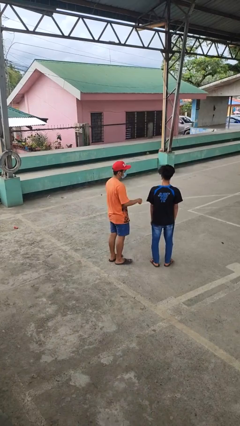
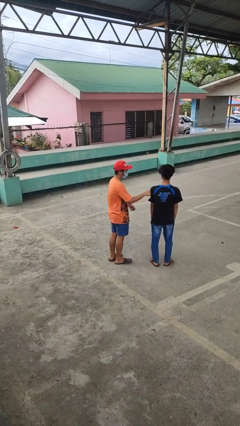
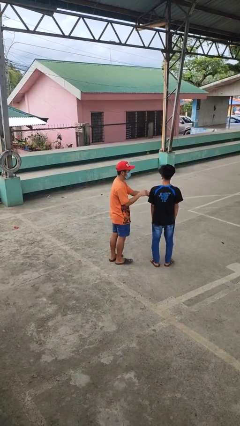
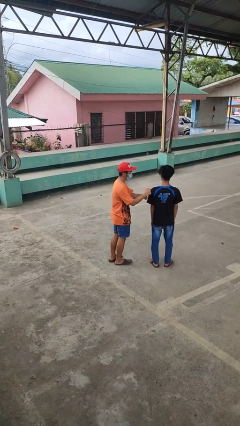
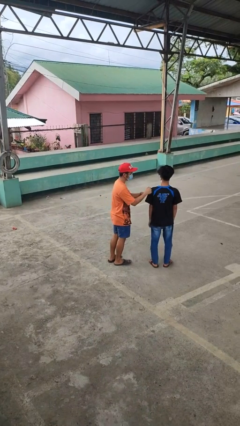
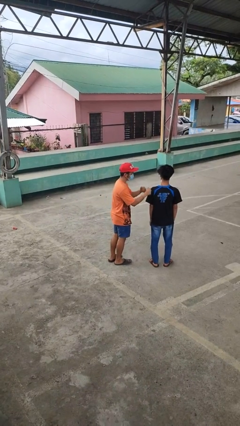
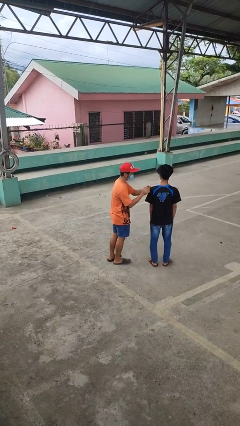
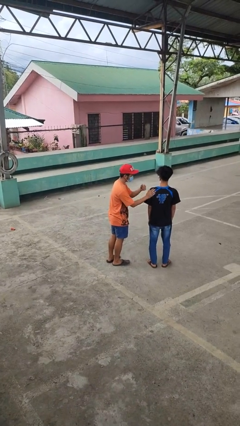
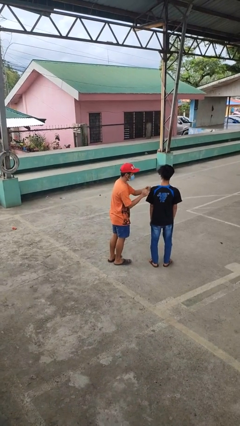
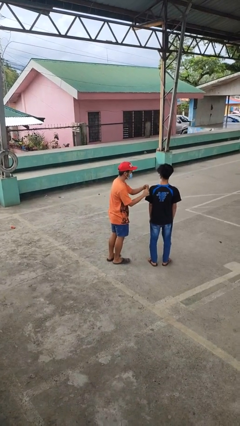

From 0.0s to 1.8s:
person pounds shoulders of person

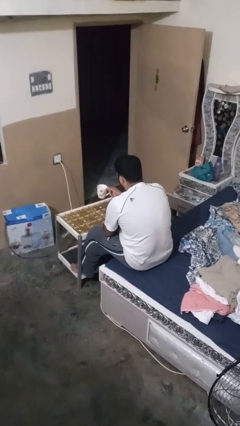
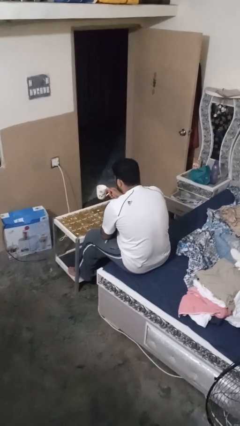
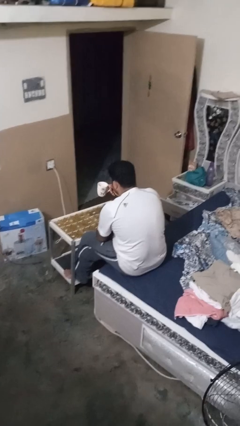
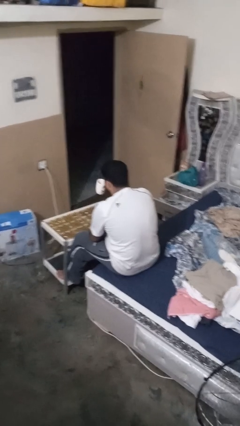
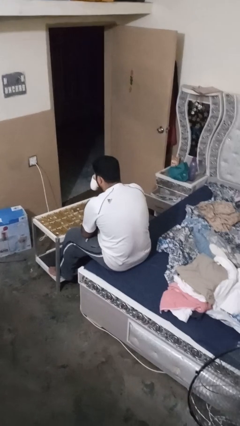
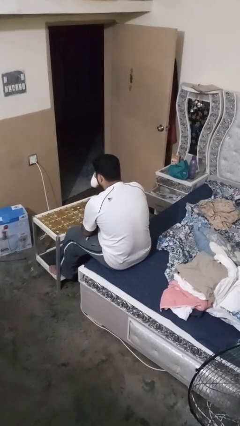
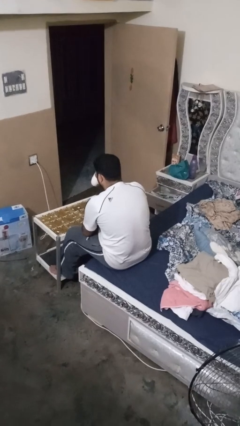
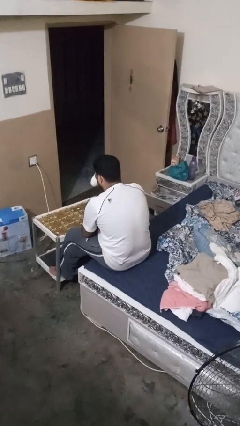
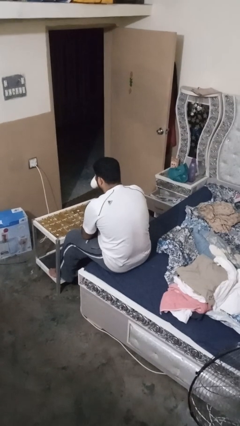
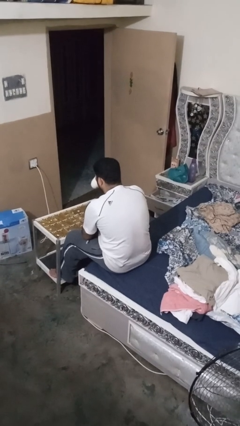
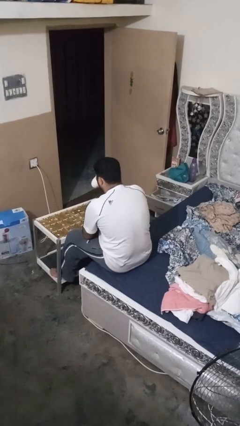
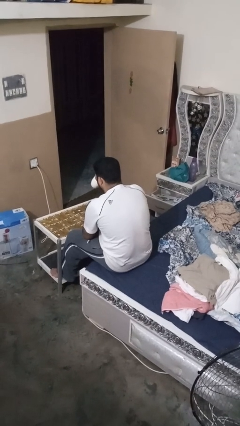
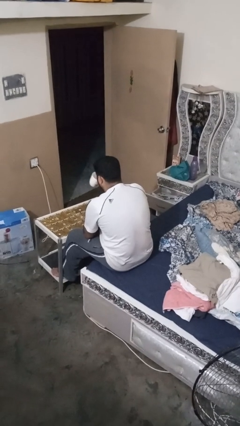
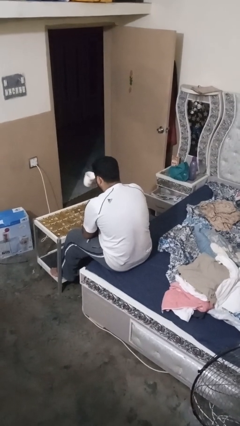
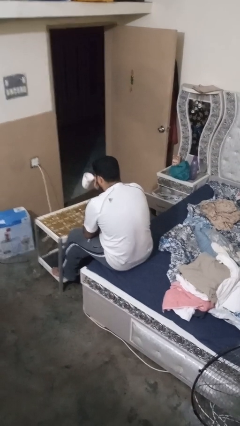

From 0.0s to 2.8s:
person drinks from mug

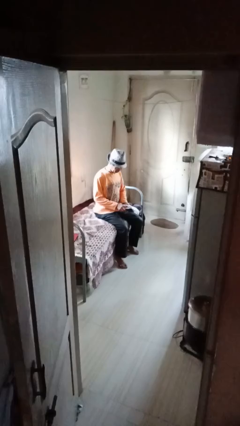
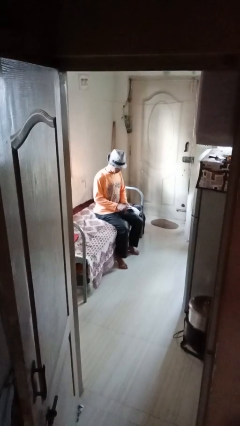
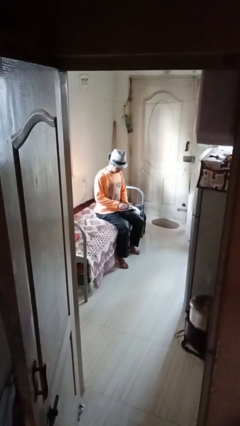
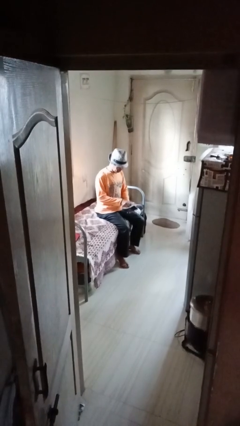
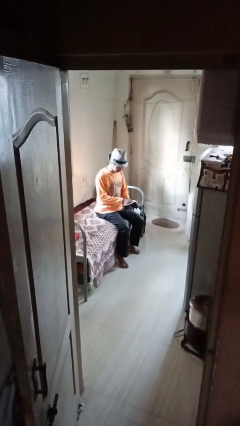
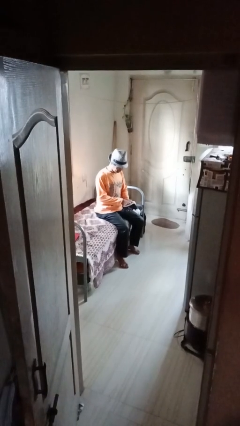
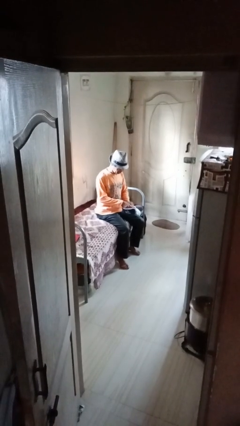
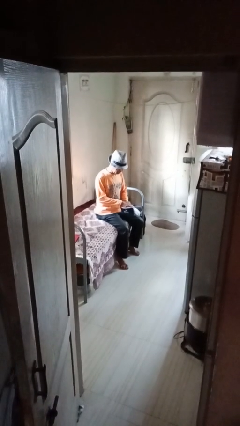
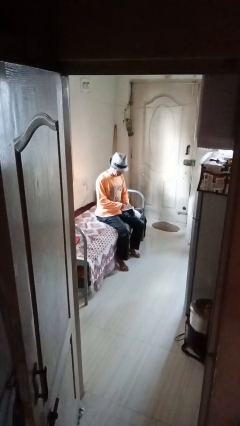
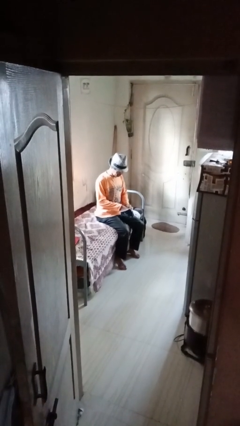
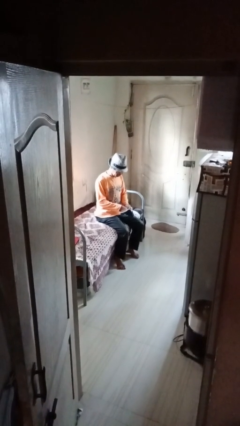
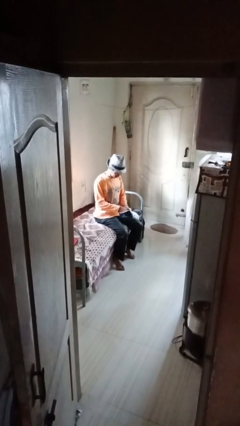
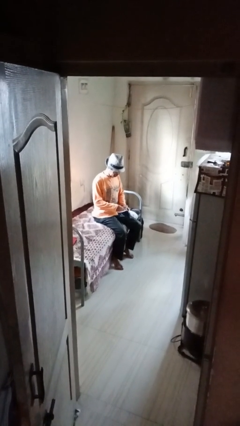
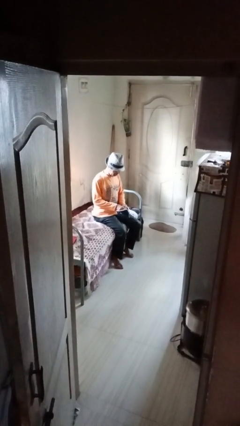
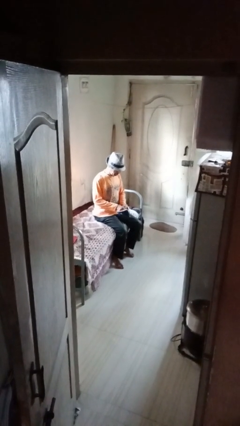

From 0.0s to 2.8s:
person searches in purse

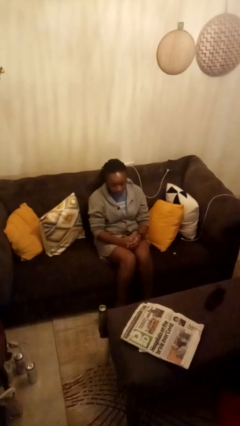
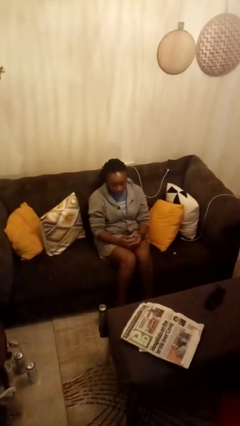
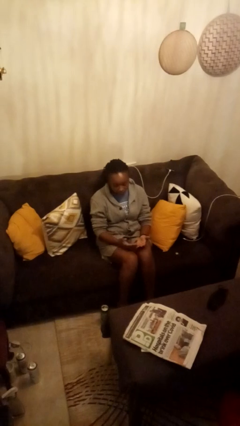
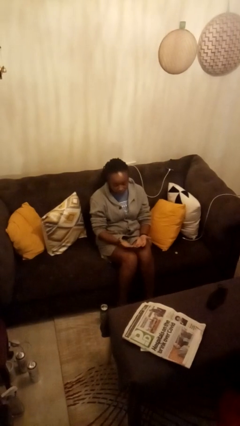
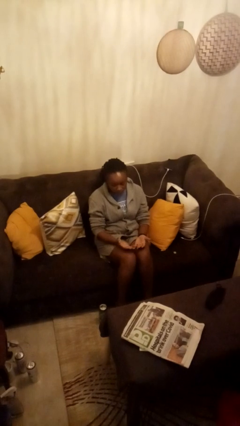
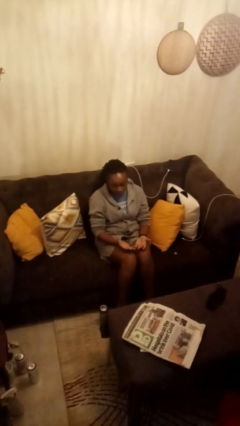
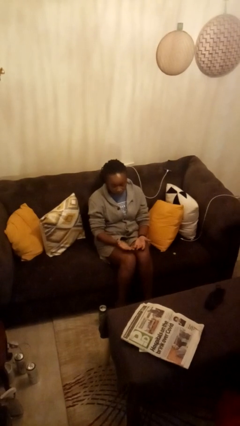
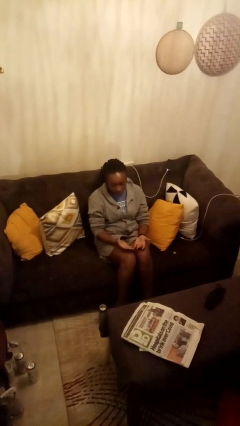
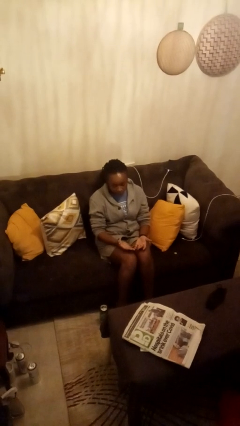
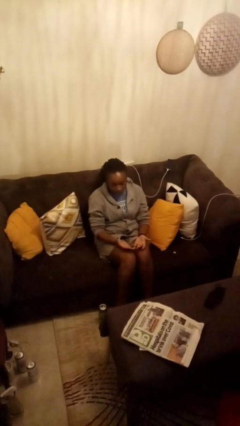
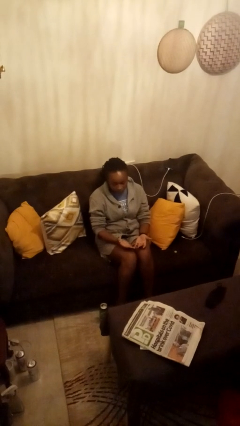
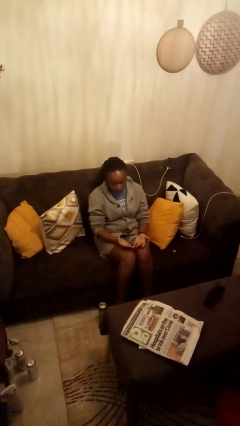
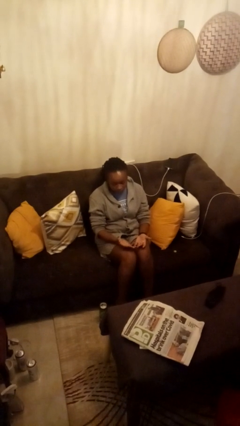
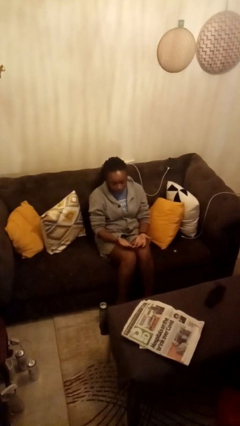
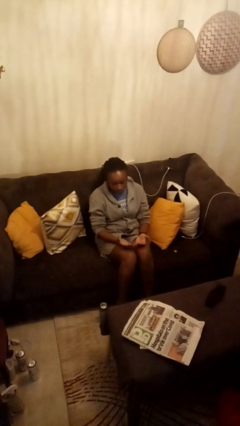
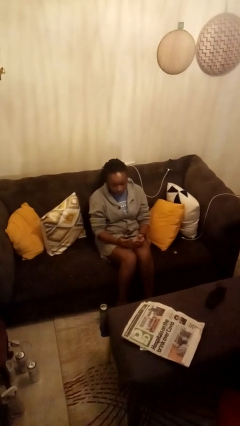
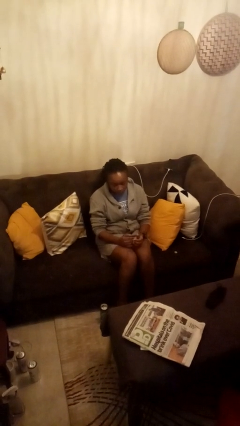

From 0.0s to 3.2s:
person looks at hands in lap

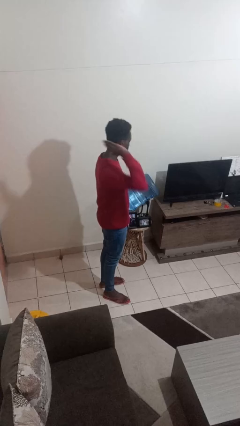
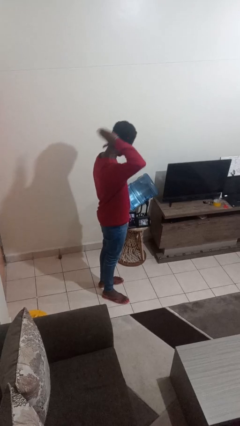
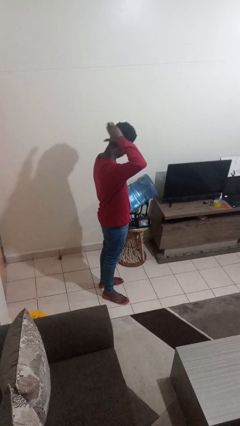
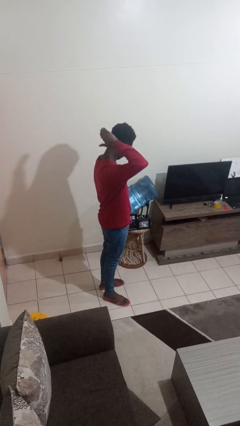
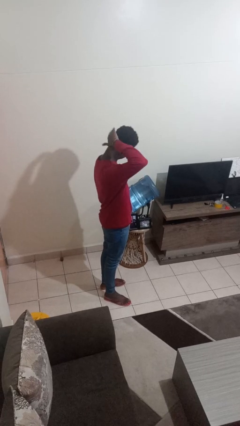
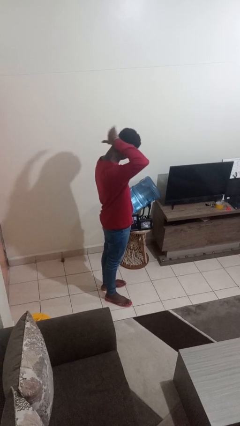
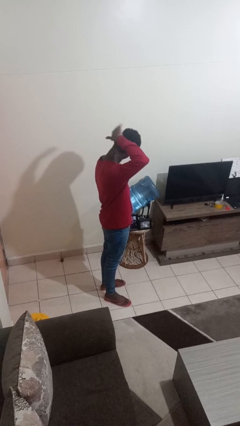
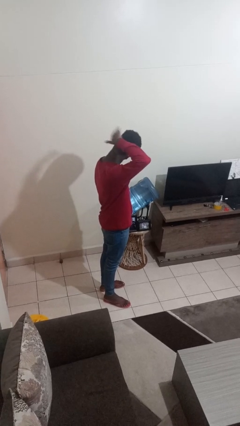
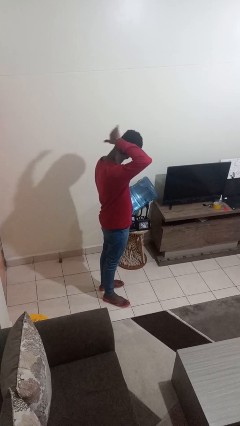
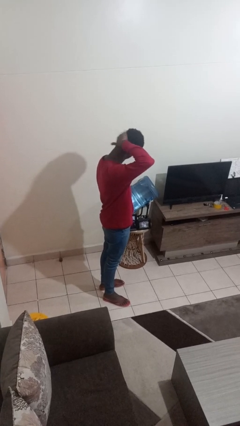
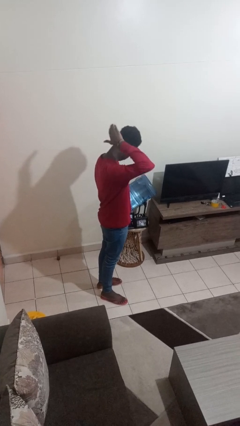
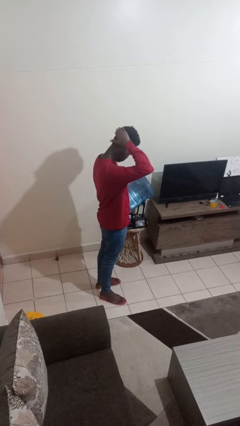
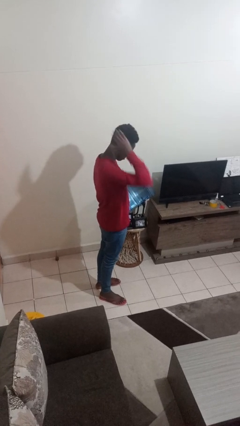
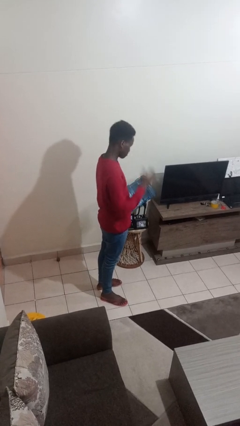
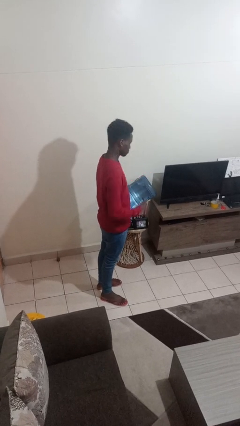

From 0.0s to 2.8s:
person pats head

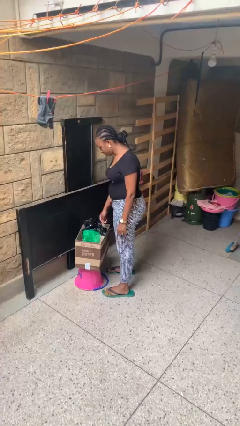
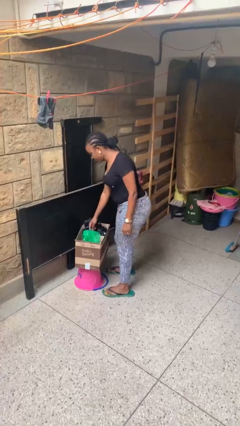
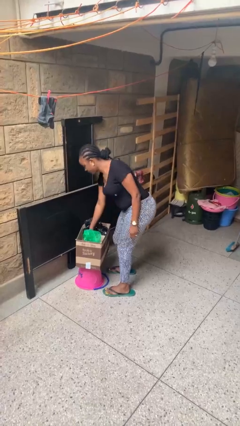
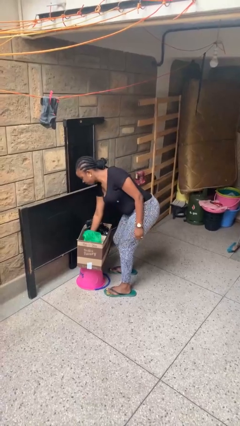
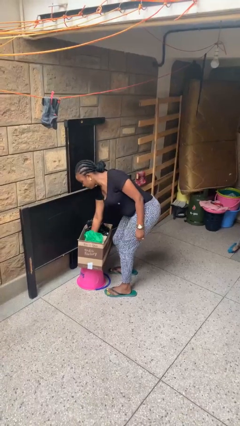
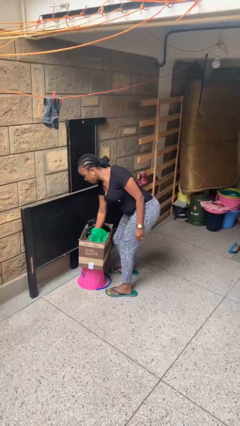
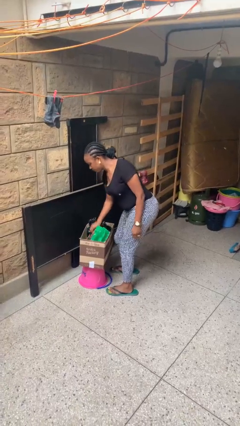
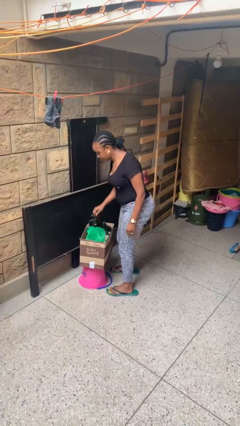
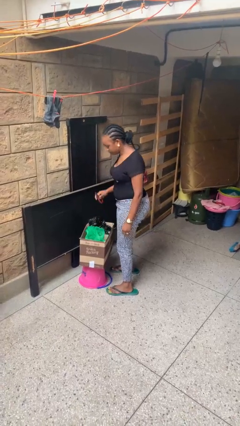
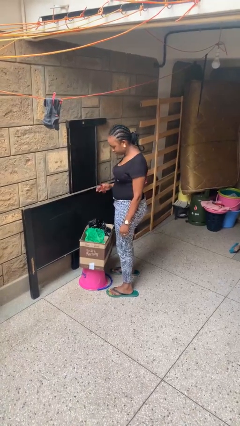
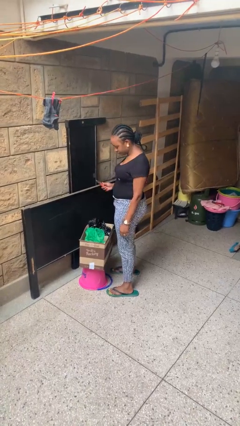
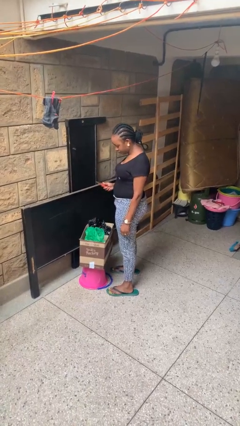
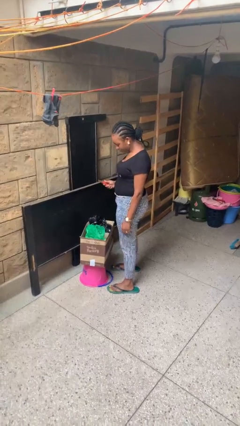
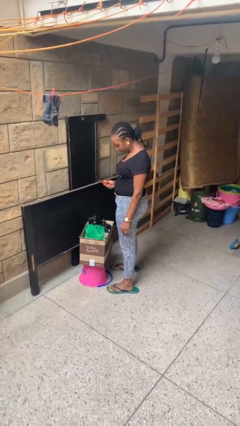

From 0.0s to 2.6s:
person takes object from box

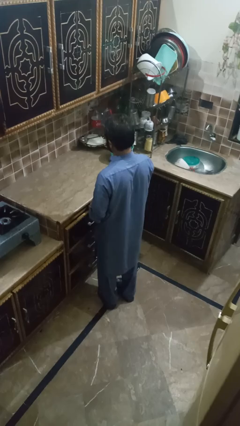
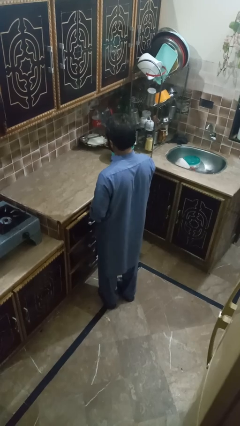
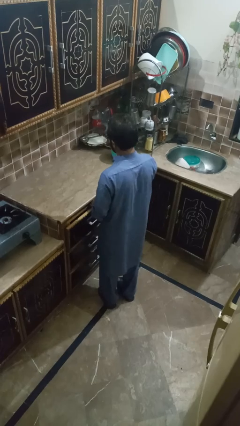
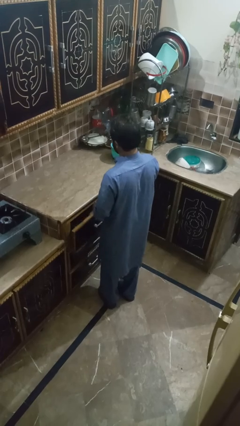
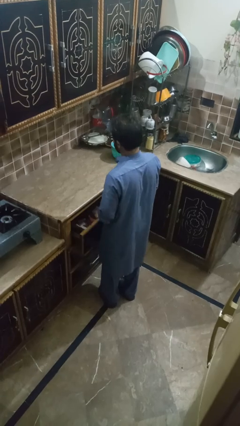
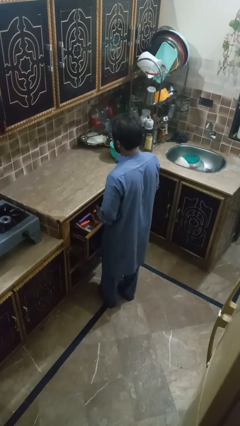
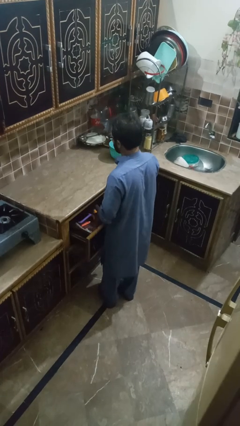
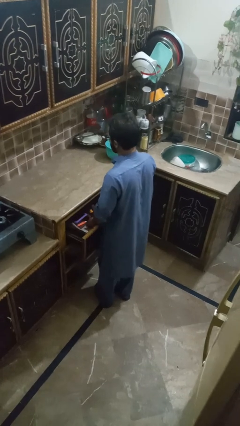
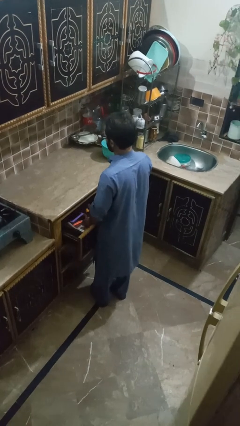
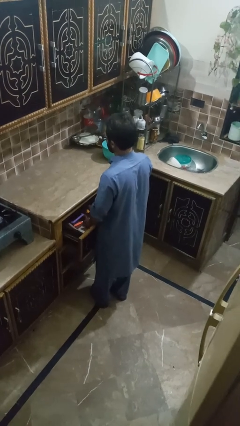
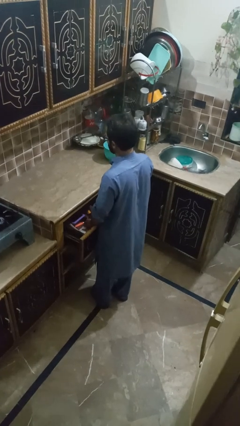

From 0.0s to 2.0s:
person searches in kitchen drawer
